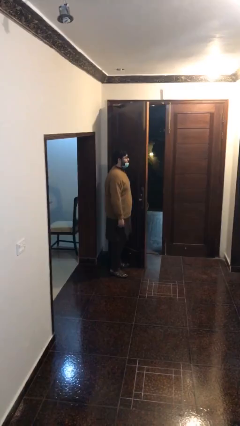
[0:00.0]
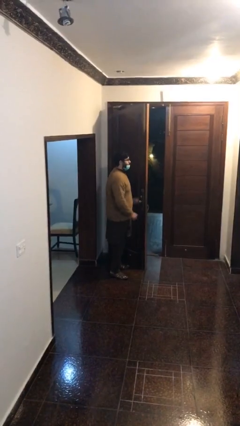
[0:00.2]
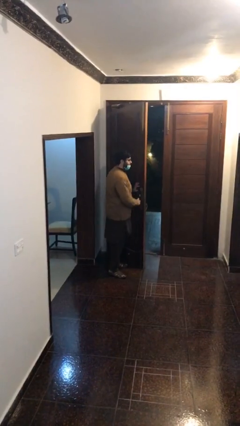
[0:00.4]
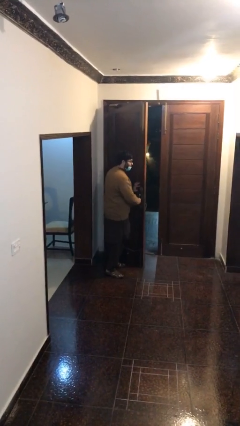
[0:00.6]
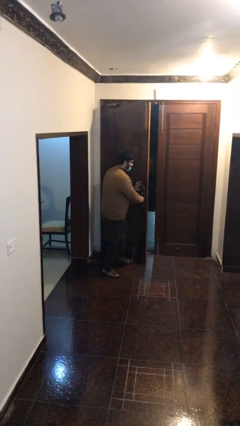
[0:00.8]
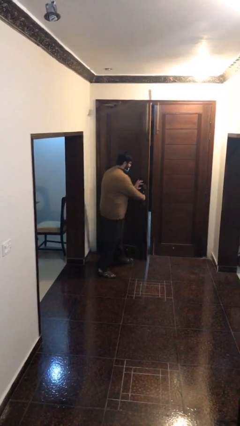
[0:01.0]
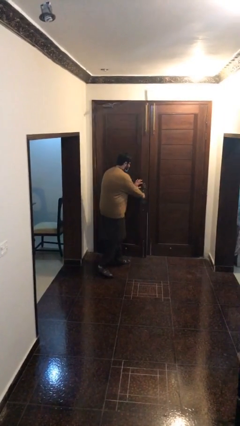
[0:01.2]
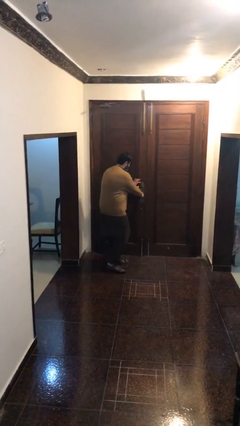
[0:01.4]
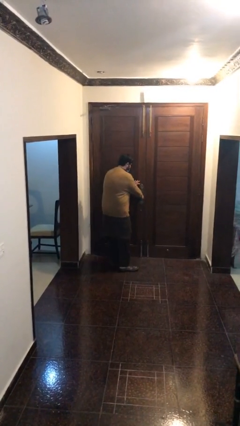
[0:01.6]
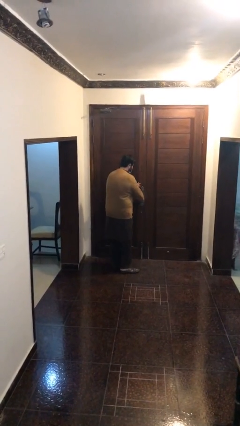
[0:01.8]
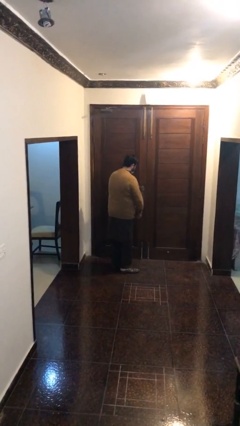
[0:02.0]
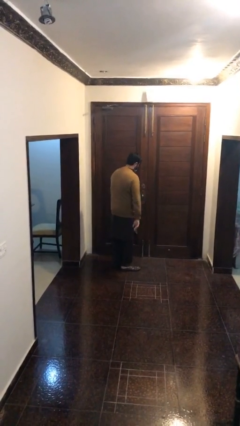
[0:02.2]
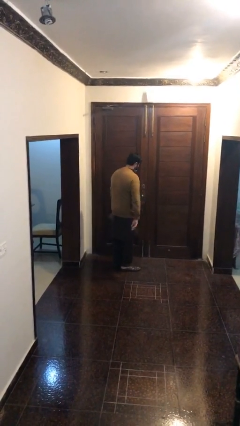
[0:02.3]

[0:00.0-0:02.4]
person closes facility door

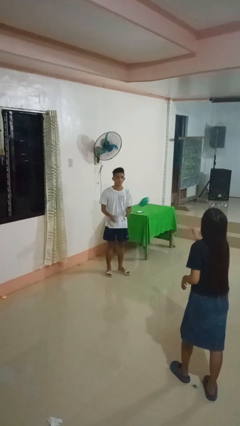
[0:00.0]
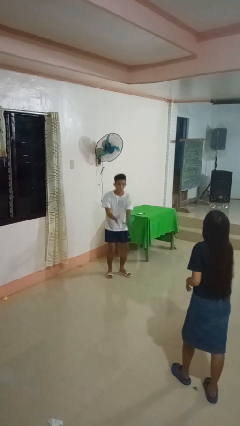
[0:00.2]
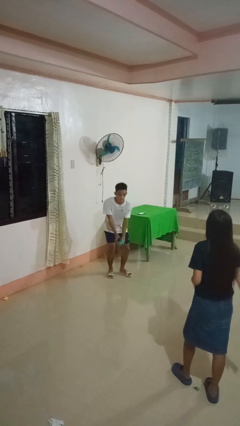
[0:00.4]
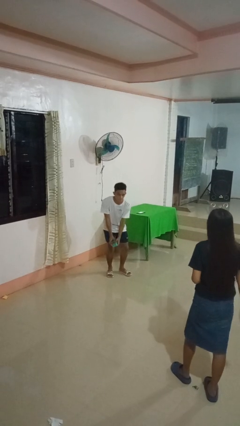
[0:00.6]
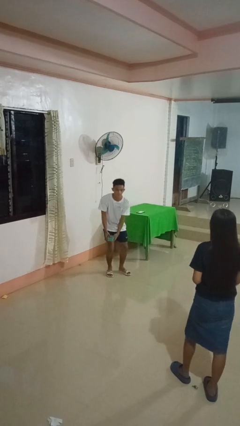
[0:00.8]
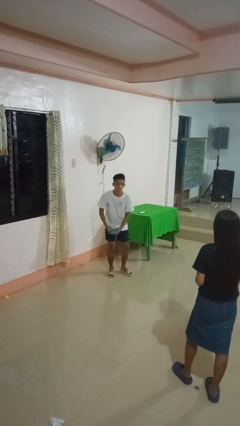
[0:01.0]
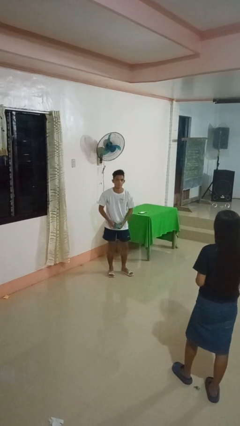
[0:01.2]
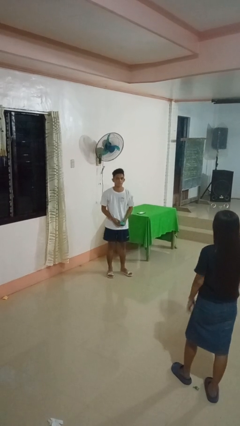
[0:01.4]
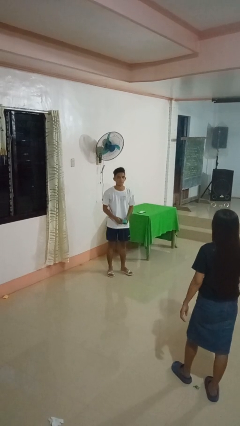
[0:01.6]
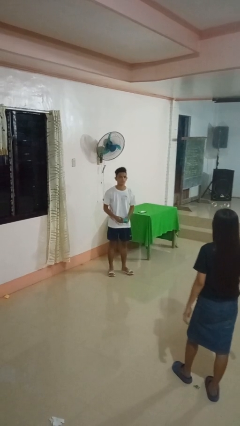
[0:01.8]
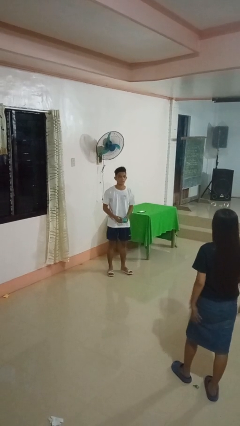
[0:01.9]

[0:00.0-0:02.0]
person catches object from person

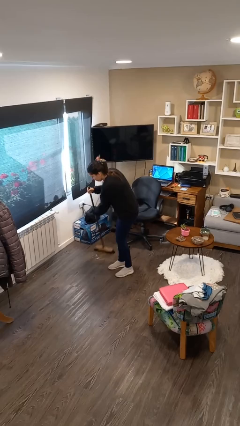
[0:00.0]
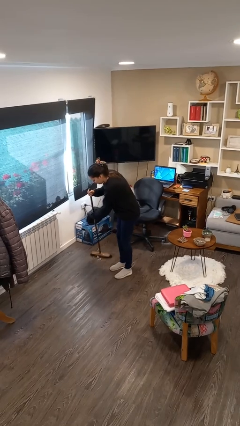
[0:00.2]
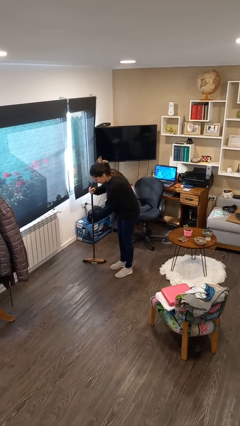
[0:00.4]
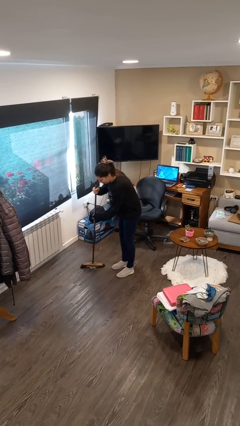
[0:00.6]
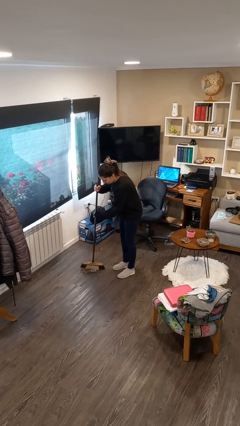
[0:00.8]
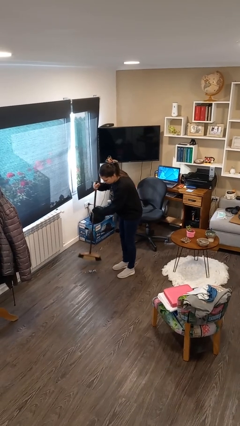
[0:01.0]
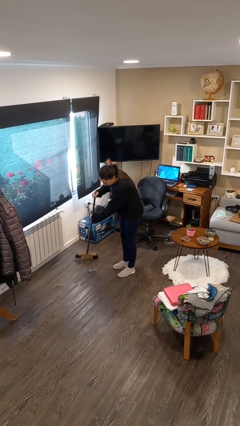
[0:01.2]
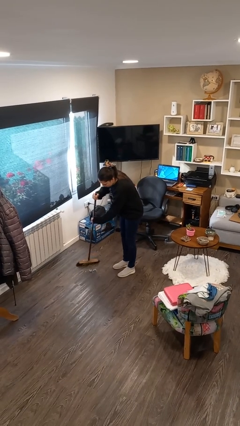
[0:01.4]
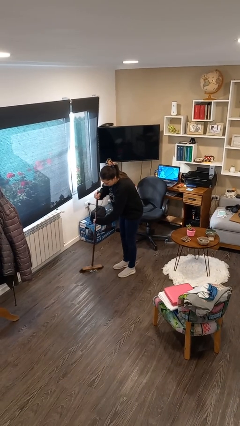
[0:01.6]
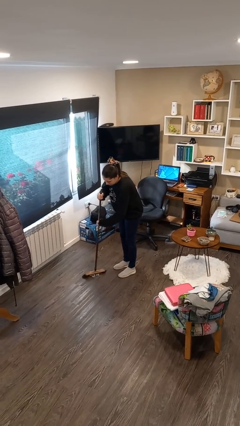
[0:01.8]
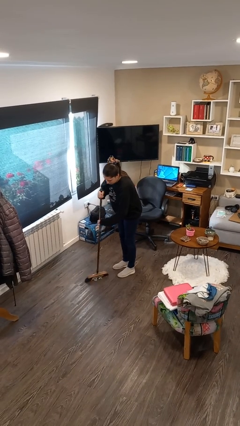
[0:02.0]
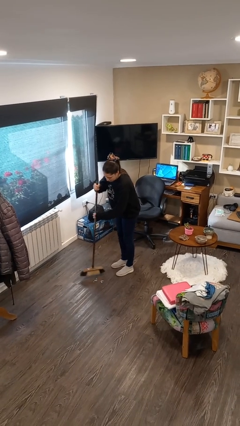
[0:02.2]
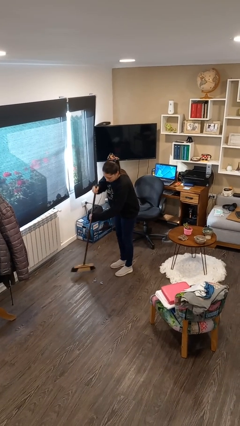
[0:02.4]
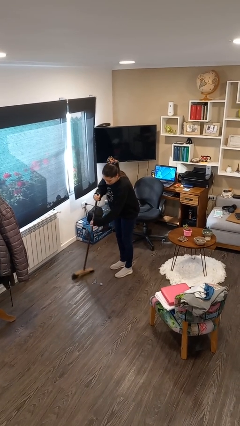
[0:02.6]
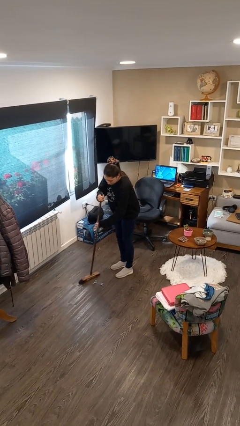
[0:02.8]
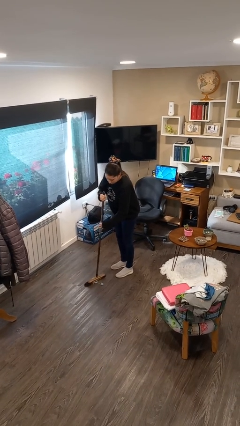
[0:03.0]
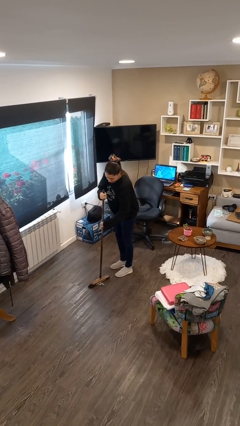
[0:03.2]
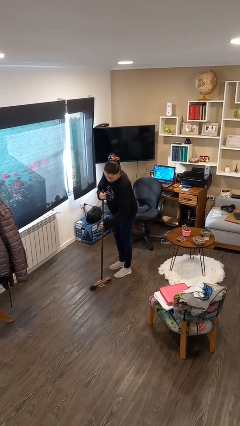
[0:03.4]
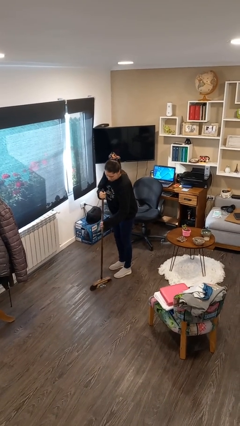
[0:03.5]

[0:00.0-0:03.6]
person sweeps floor

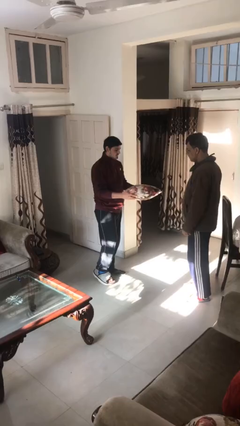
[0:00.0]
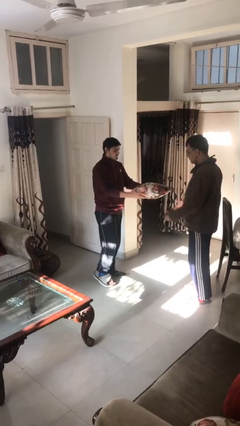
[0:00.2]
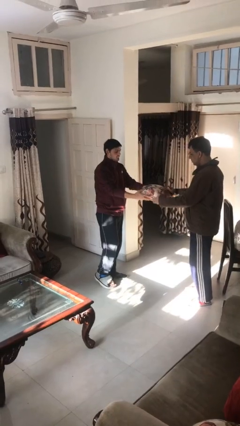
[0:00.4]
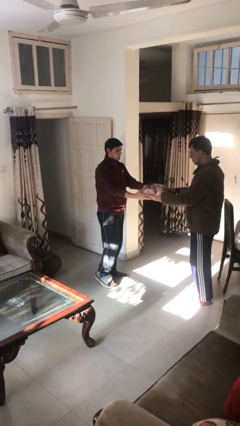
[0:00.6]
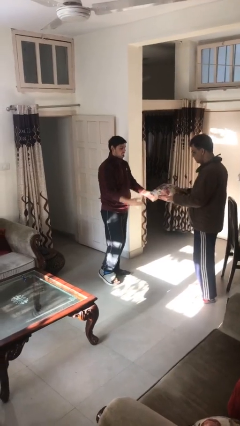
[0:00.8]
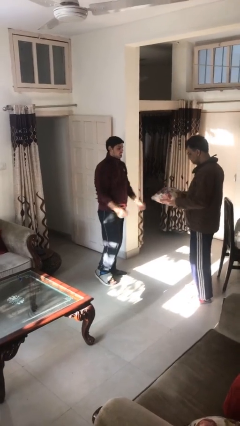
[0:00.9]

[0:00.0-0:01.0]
person transfers object to person

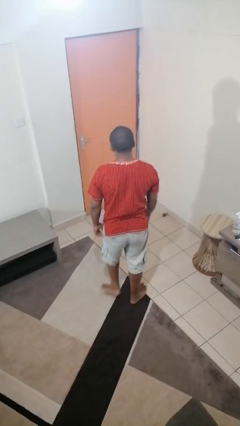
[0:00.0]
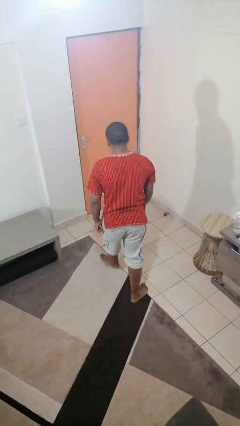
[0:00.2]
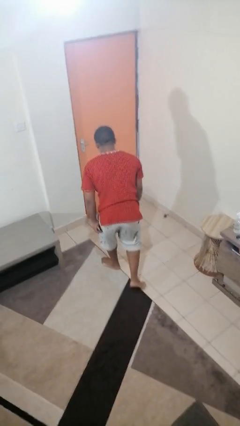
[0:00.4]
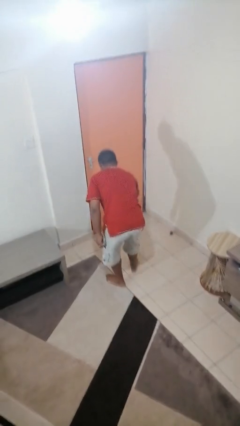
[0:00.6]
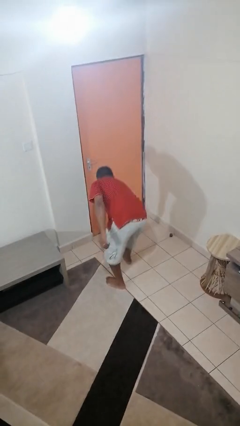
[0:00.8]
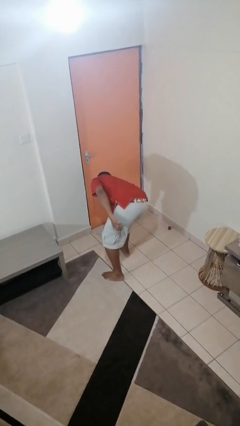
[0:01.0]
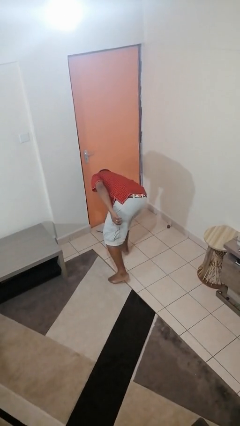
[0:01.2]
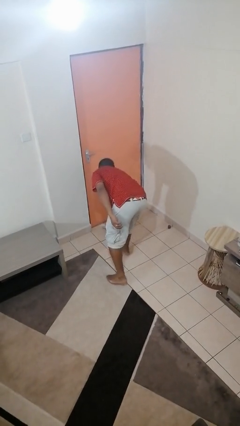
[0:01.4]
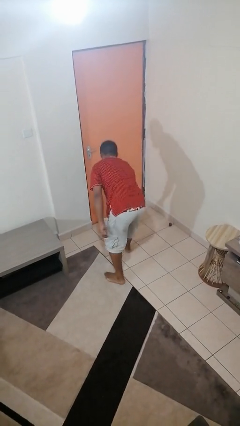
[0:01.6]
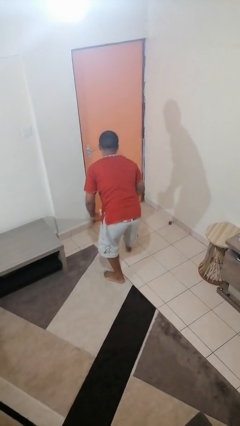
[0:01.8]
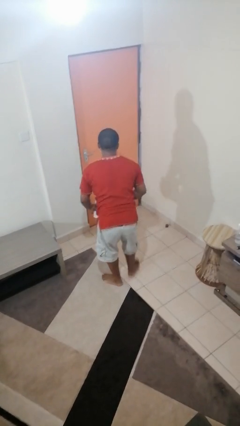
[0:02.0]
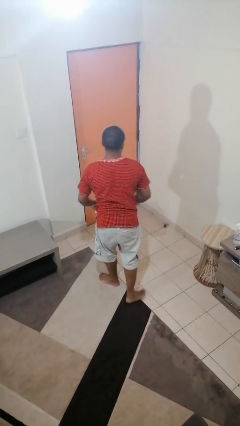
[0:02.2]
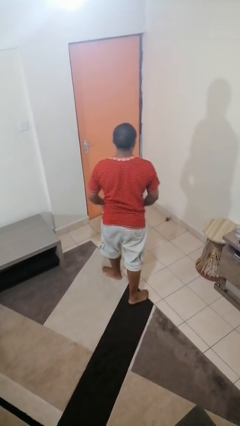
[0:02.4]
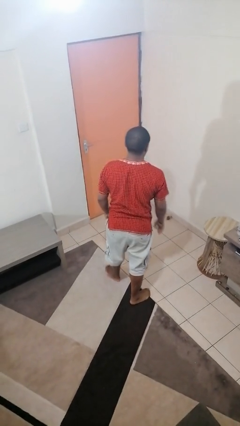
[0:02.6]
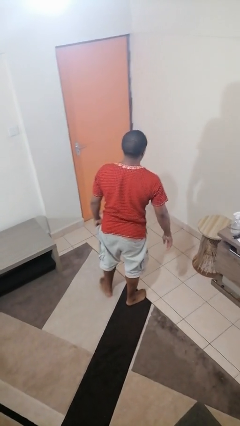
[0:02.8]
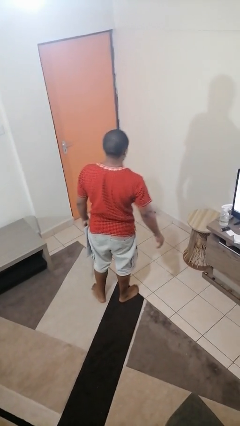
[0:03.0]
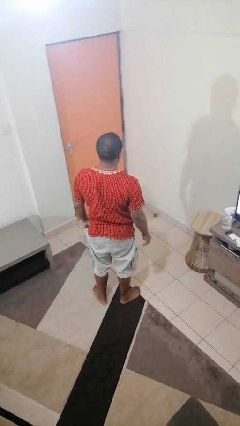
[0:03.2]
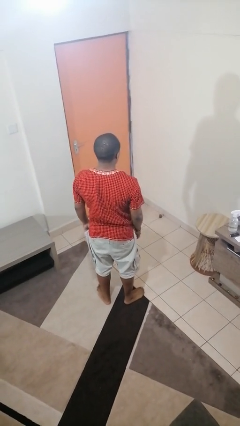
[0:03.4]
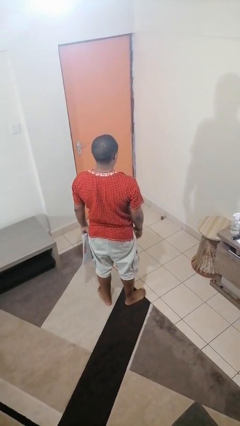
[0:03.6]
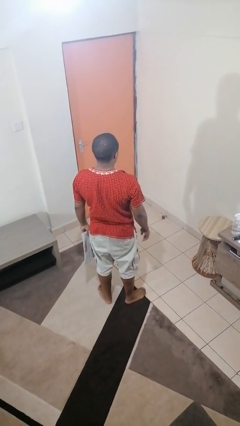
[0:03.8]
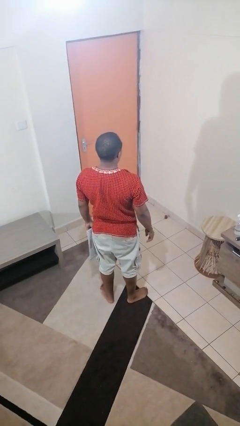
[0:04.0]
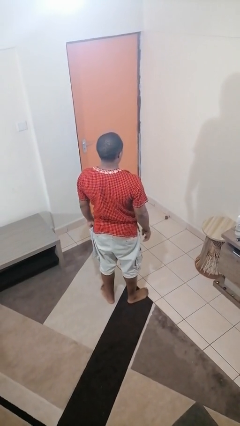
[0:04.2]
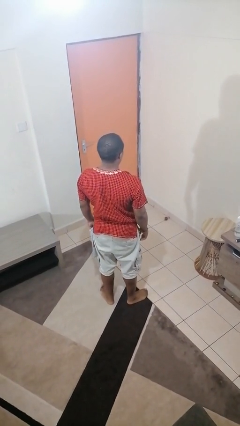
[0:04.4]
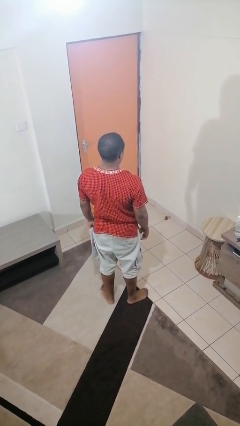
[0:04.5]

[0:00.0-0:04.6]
person picks up object from floor

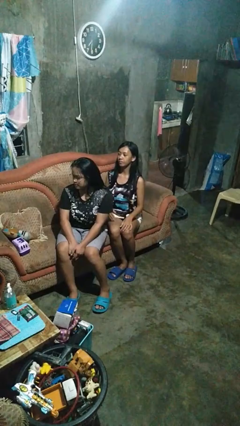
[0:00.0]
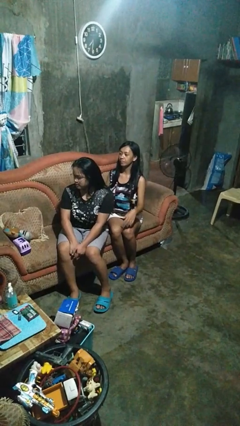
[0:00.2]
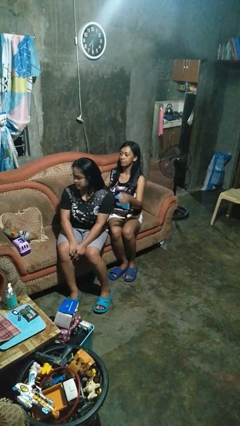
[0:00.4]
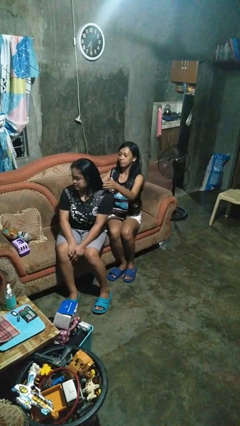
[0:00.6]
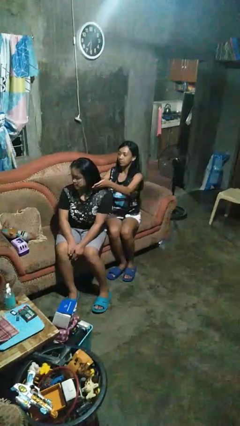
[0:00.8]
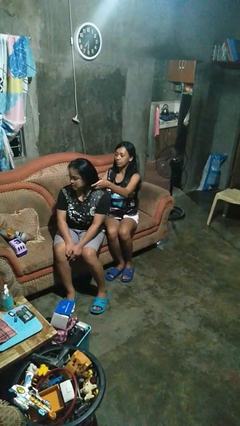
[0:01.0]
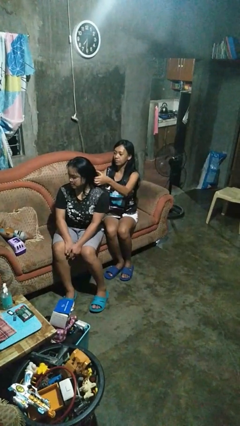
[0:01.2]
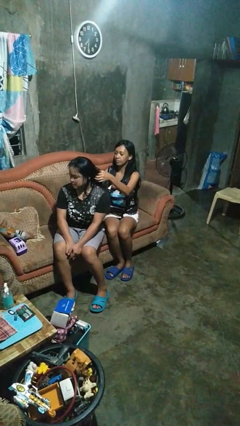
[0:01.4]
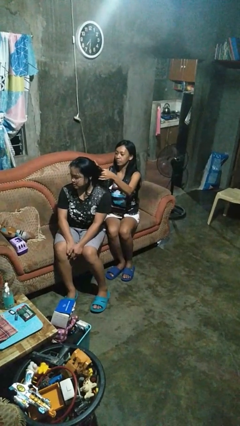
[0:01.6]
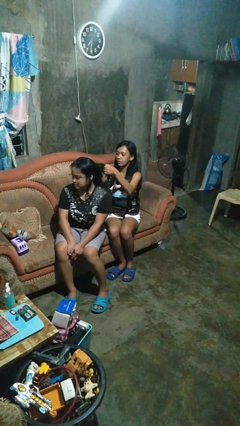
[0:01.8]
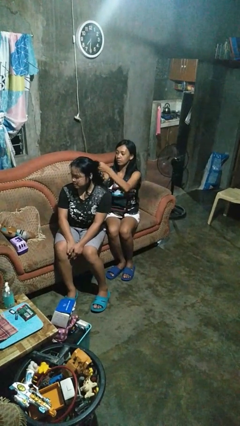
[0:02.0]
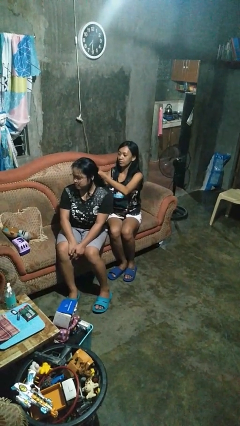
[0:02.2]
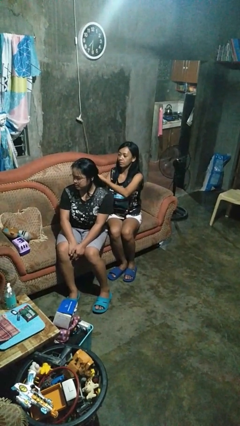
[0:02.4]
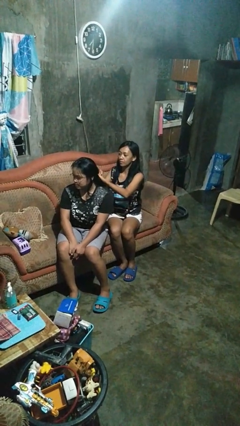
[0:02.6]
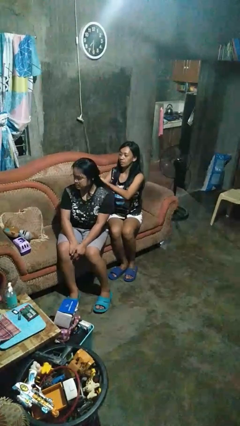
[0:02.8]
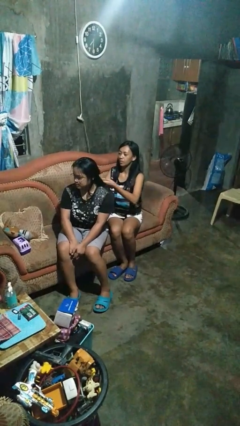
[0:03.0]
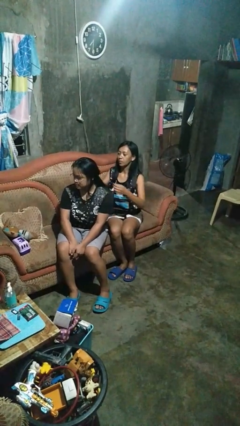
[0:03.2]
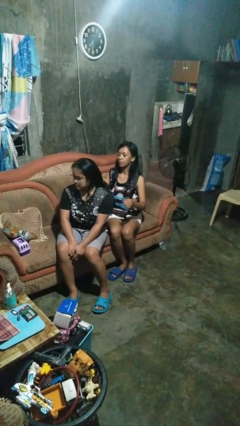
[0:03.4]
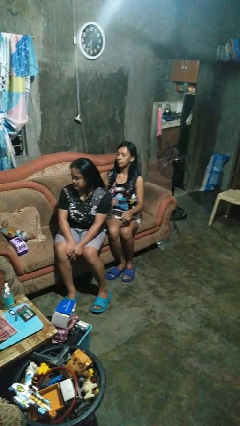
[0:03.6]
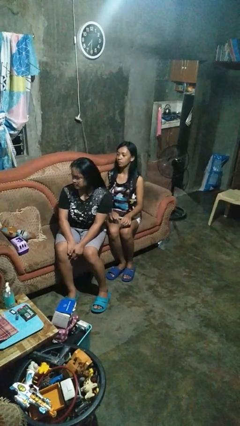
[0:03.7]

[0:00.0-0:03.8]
person braids hair of person
